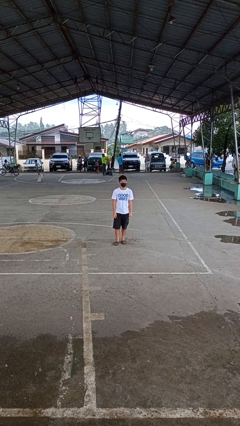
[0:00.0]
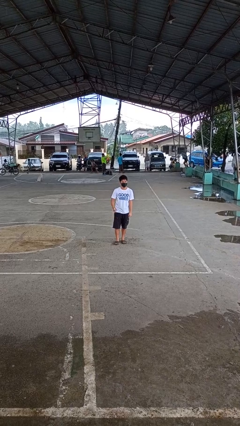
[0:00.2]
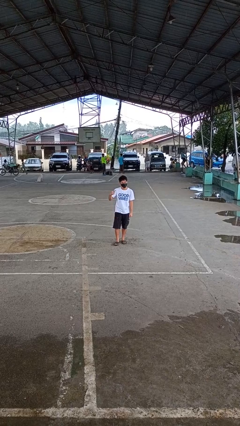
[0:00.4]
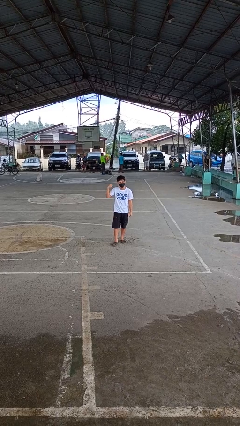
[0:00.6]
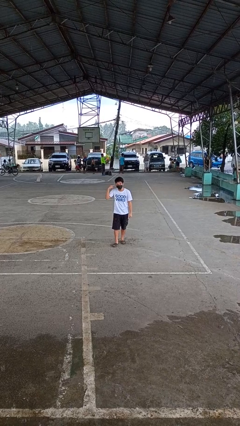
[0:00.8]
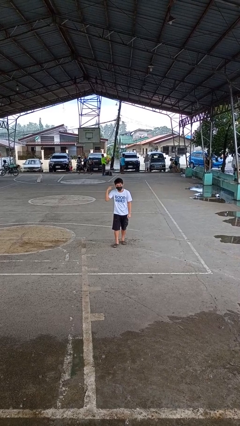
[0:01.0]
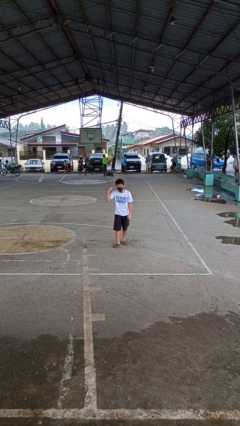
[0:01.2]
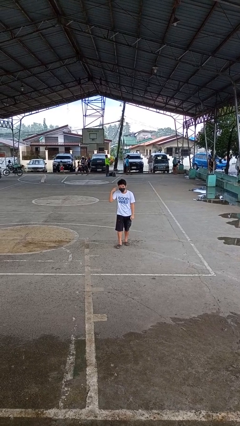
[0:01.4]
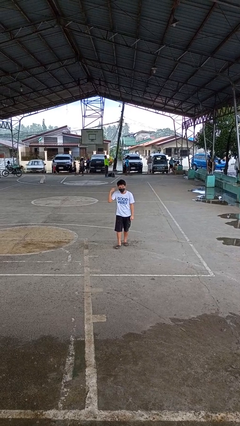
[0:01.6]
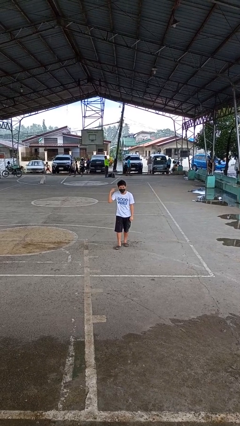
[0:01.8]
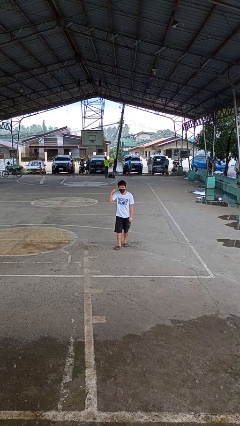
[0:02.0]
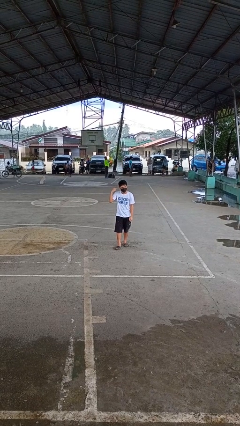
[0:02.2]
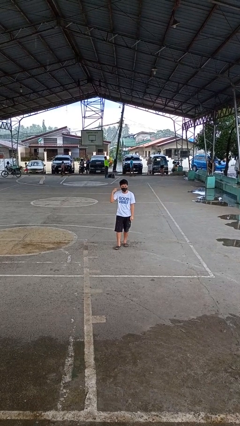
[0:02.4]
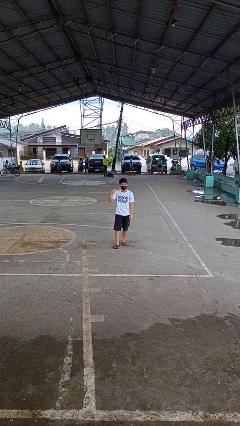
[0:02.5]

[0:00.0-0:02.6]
person gestures listen closely

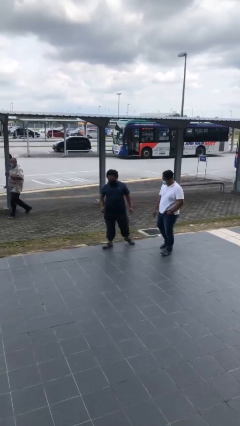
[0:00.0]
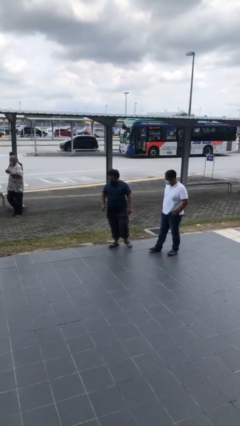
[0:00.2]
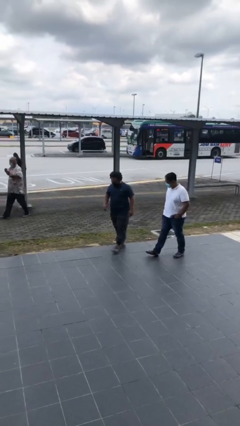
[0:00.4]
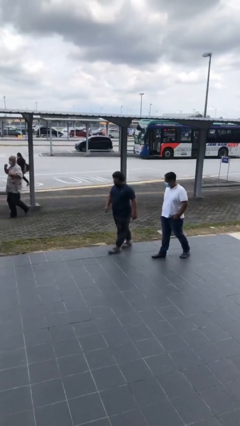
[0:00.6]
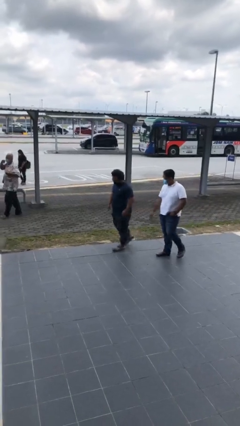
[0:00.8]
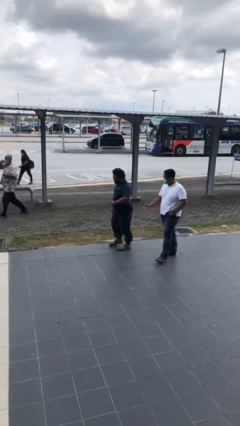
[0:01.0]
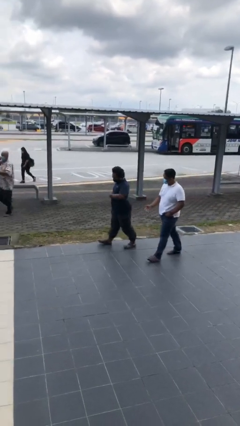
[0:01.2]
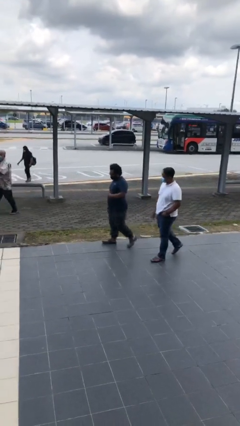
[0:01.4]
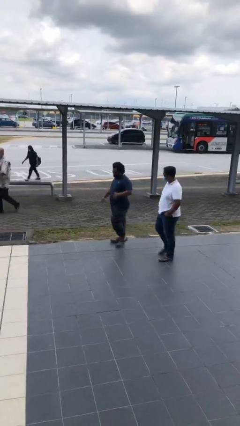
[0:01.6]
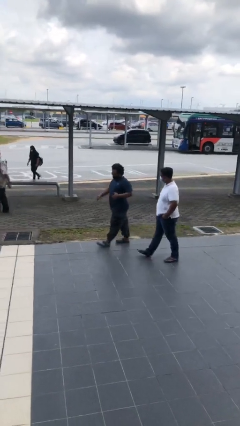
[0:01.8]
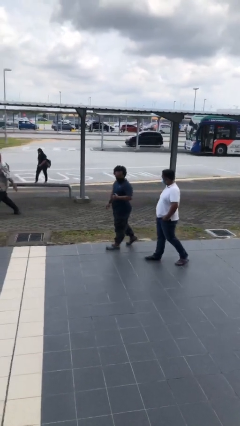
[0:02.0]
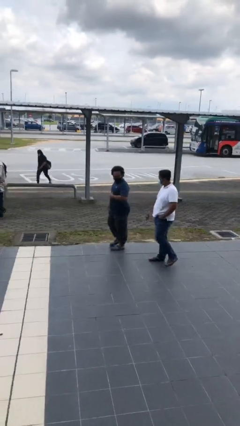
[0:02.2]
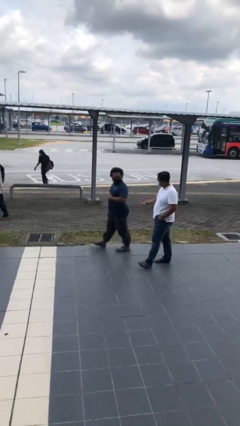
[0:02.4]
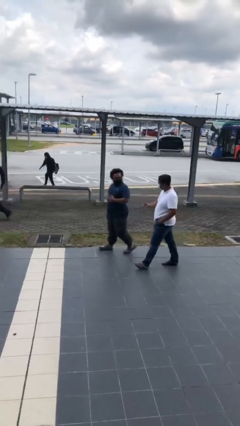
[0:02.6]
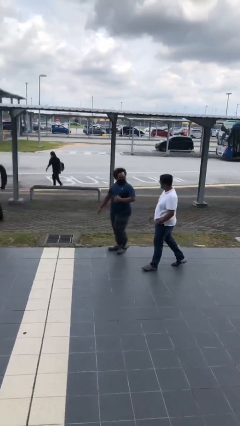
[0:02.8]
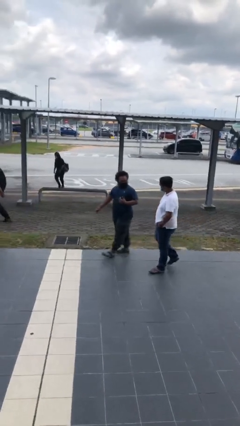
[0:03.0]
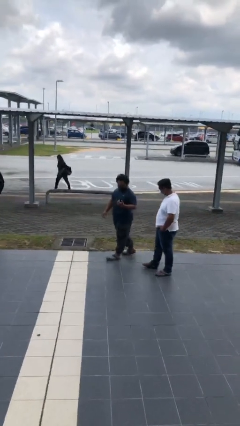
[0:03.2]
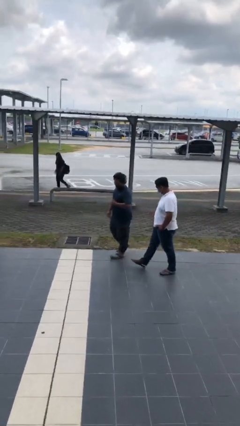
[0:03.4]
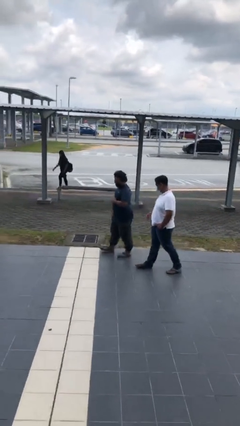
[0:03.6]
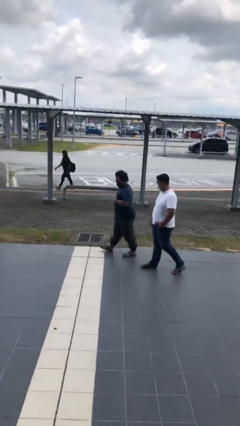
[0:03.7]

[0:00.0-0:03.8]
person talks to person

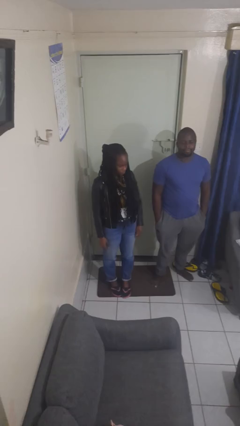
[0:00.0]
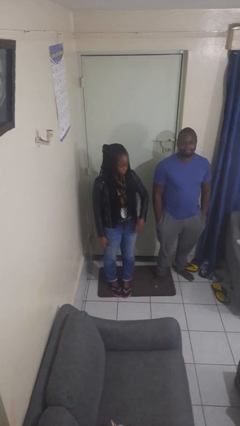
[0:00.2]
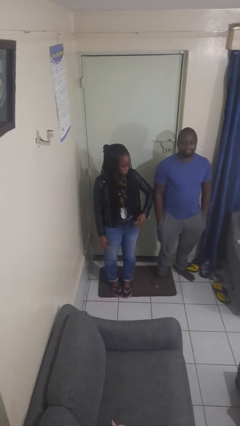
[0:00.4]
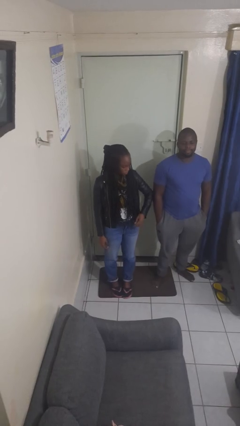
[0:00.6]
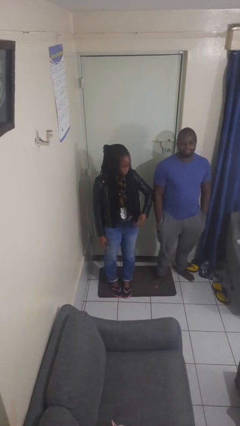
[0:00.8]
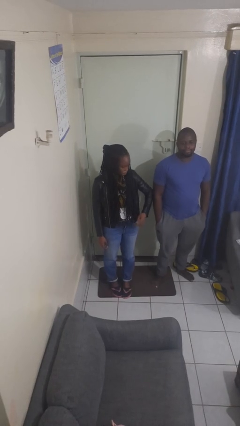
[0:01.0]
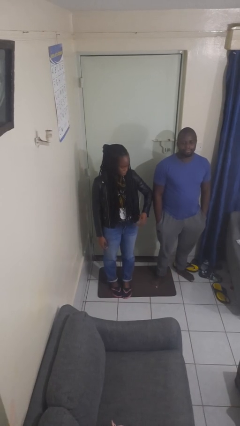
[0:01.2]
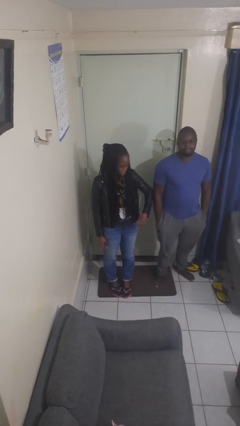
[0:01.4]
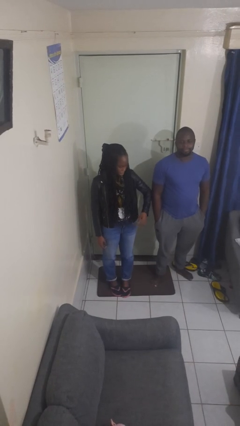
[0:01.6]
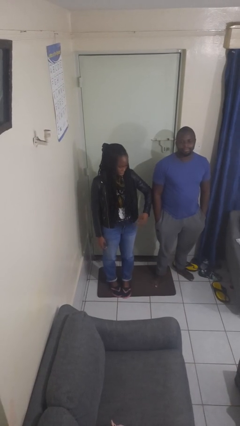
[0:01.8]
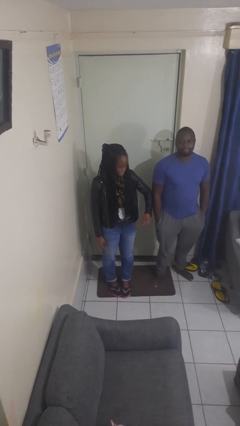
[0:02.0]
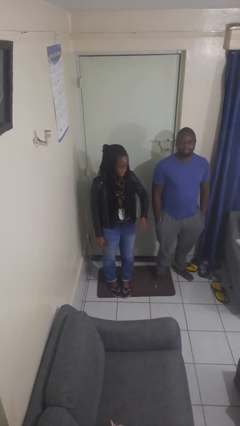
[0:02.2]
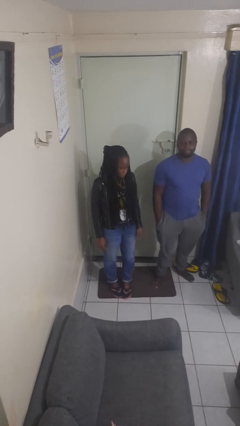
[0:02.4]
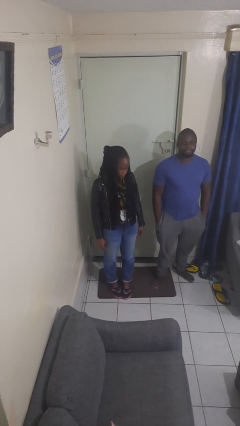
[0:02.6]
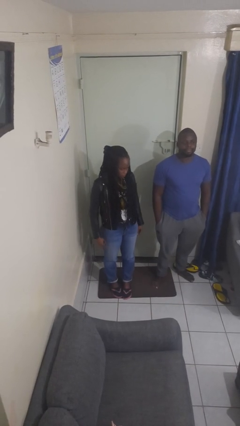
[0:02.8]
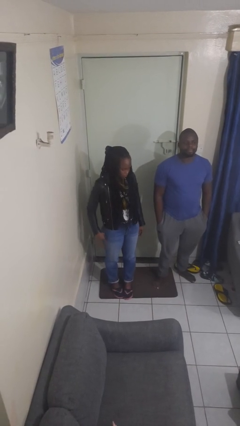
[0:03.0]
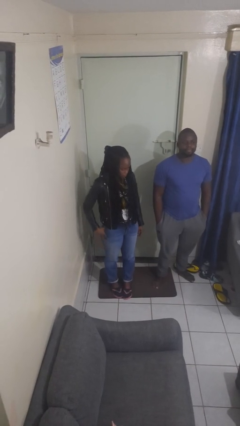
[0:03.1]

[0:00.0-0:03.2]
person nudges person with elbow

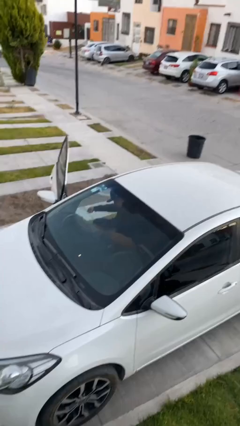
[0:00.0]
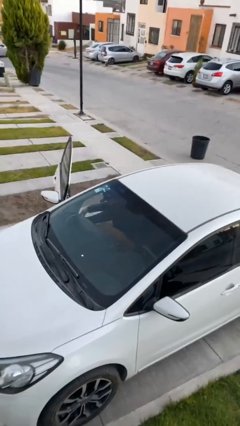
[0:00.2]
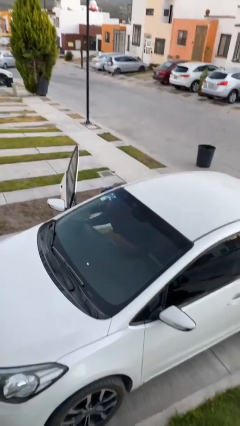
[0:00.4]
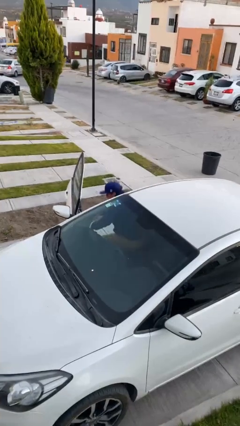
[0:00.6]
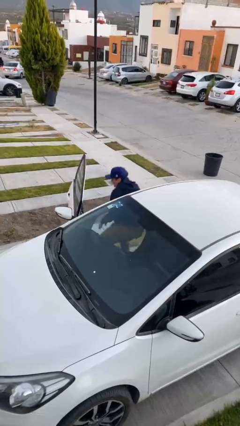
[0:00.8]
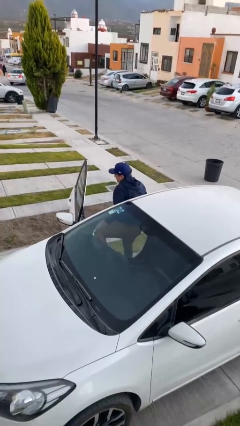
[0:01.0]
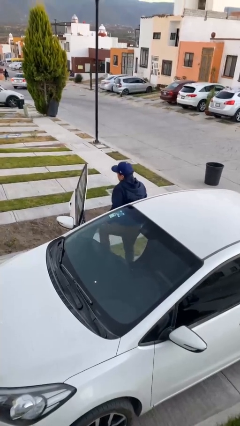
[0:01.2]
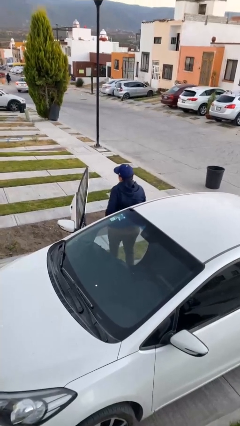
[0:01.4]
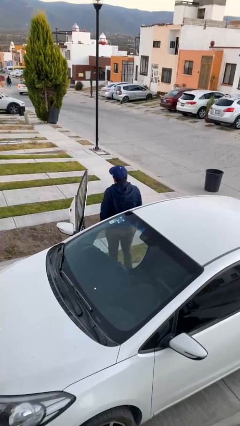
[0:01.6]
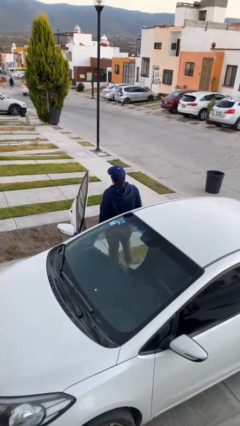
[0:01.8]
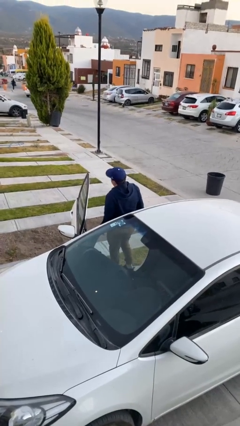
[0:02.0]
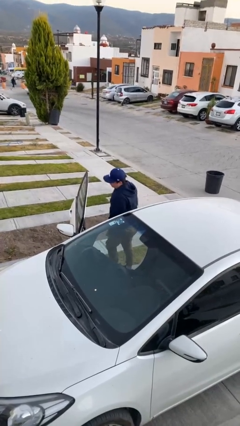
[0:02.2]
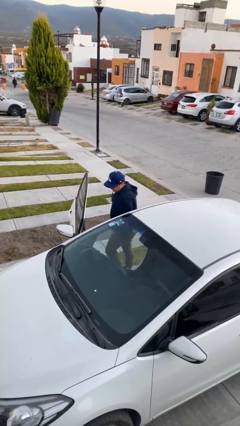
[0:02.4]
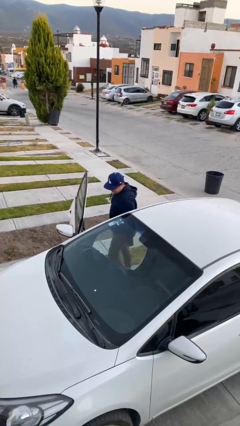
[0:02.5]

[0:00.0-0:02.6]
person exits car

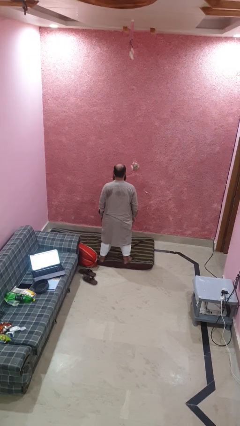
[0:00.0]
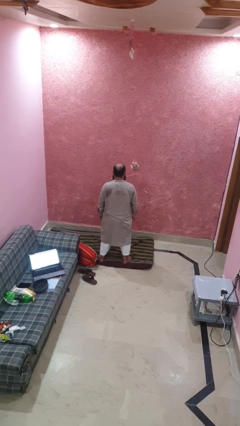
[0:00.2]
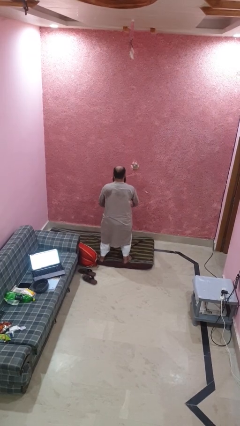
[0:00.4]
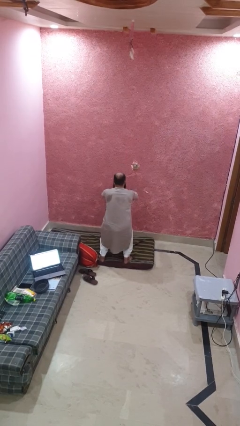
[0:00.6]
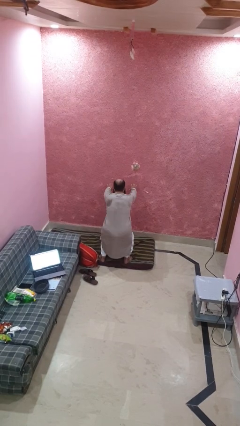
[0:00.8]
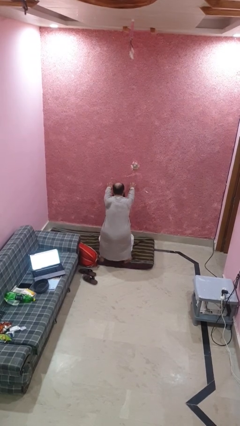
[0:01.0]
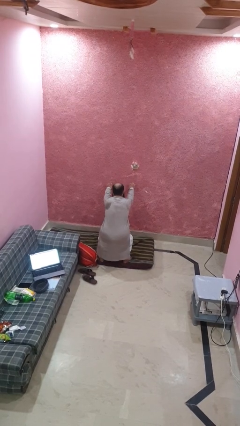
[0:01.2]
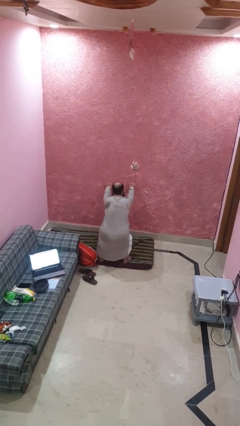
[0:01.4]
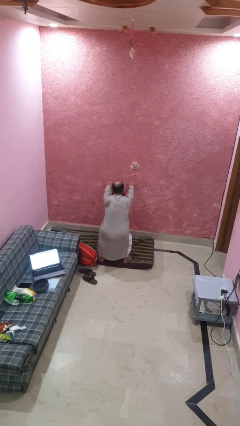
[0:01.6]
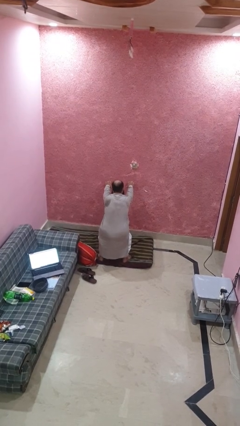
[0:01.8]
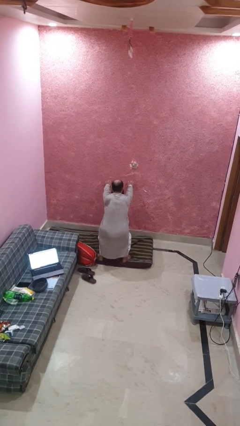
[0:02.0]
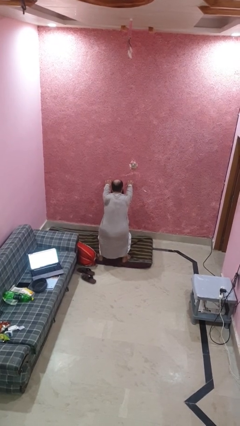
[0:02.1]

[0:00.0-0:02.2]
person squats

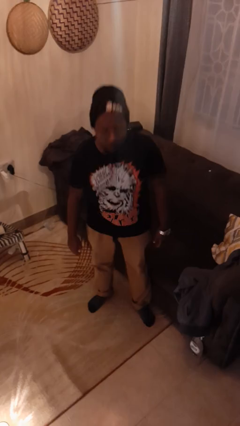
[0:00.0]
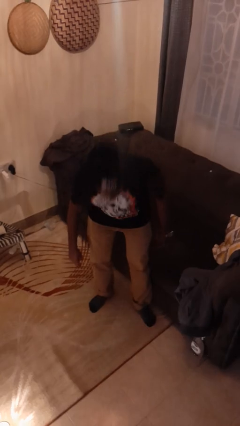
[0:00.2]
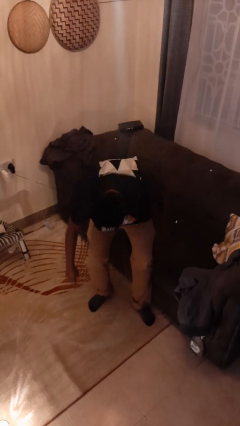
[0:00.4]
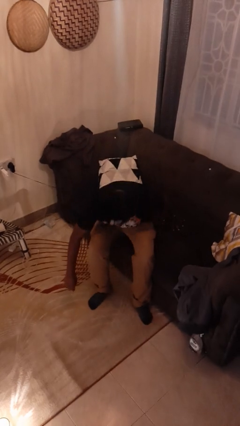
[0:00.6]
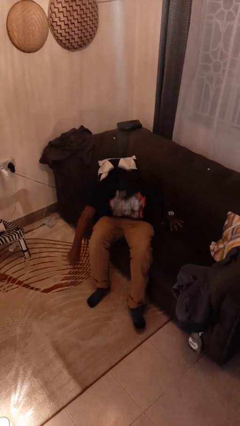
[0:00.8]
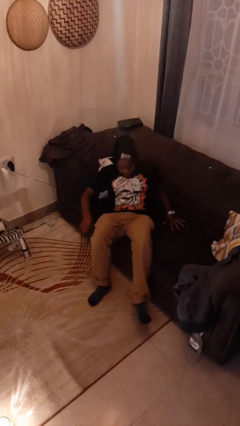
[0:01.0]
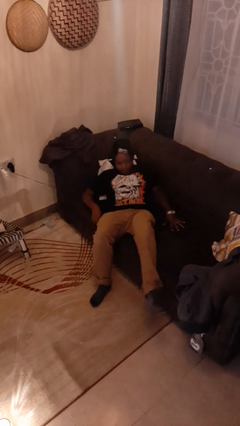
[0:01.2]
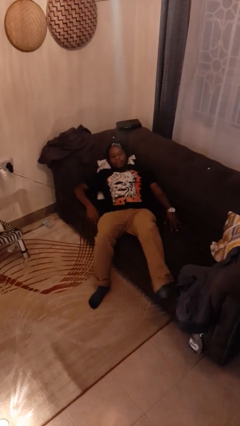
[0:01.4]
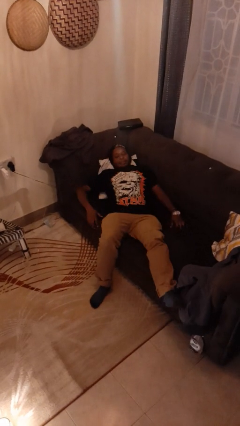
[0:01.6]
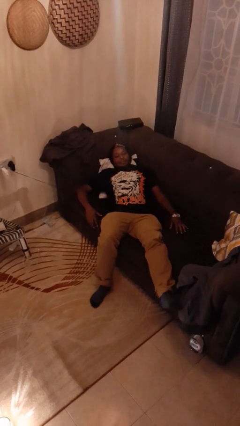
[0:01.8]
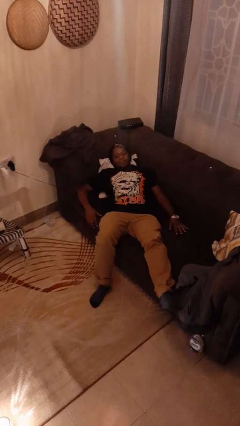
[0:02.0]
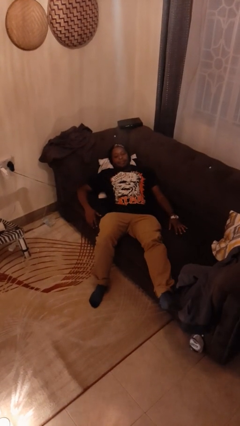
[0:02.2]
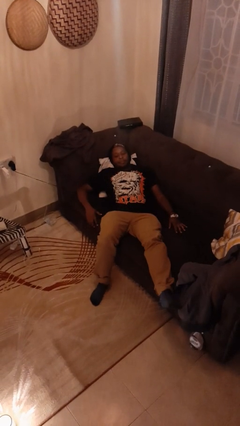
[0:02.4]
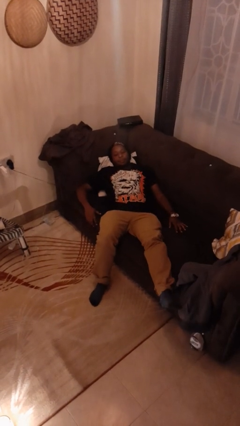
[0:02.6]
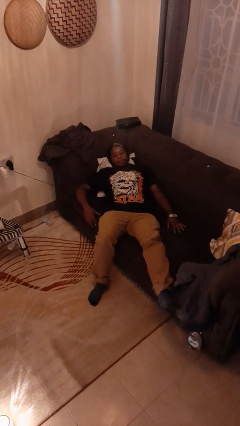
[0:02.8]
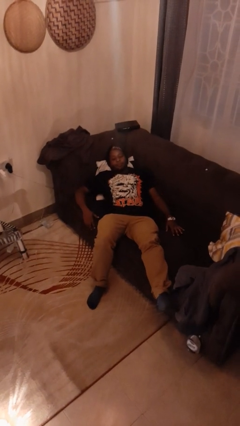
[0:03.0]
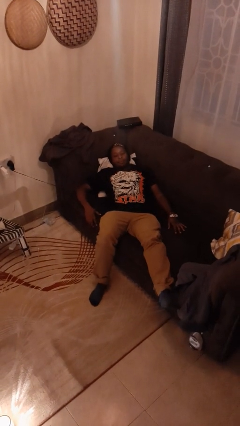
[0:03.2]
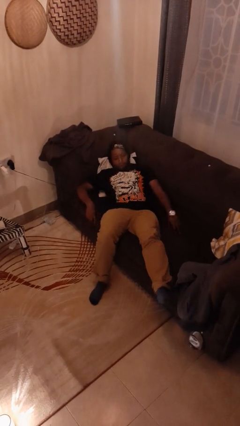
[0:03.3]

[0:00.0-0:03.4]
person lies down on couch
